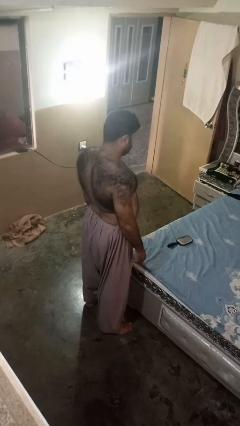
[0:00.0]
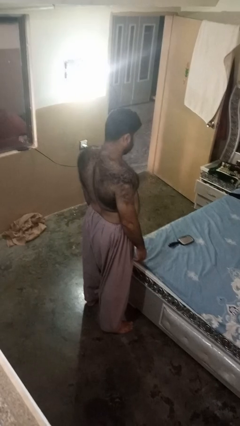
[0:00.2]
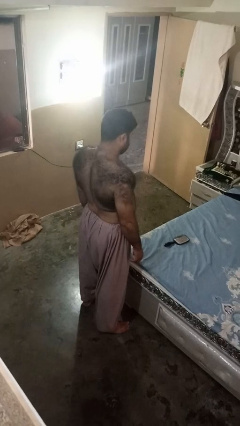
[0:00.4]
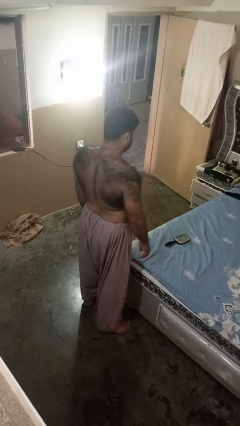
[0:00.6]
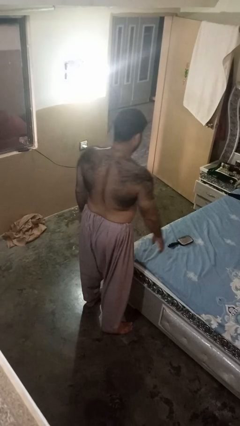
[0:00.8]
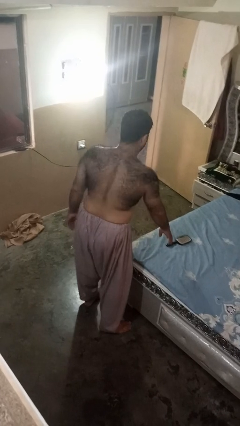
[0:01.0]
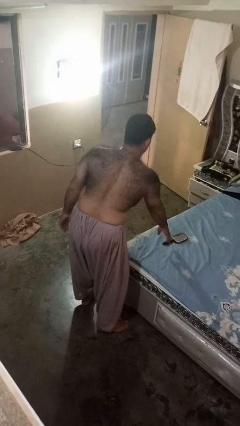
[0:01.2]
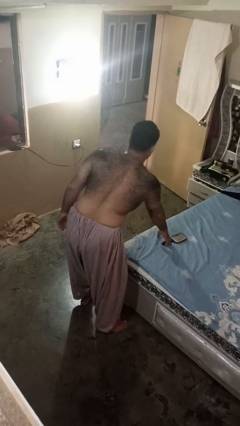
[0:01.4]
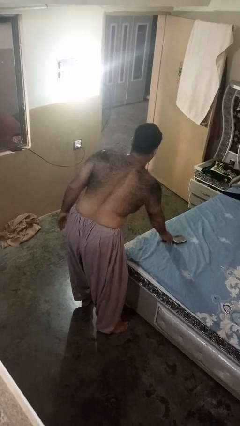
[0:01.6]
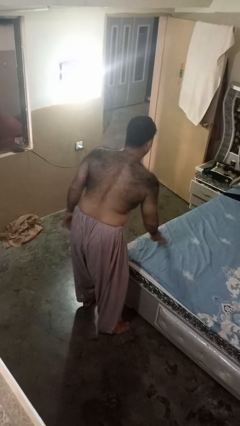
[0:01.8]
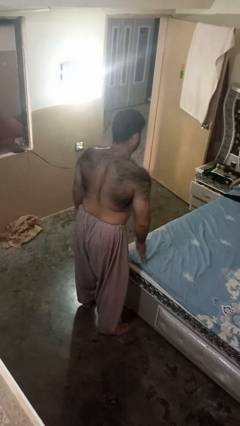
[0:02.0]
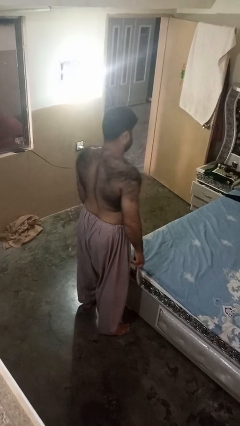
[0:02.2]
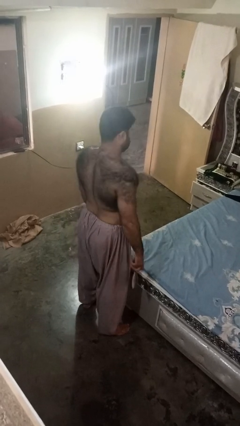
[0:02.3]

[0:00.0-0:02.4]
person picks up object from bed

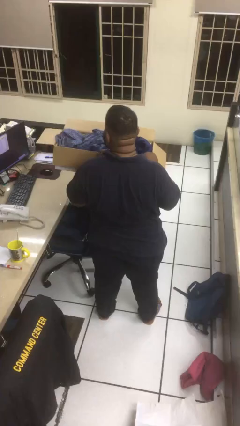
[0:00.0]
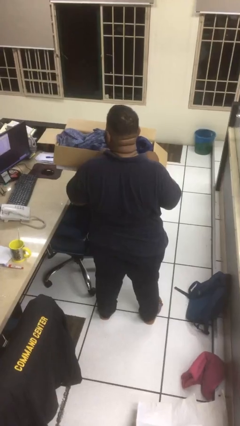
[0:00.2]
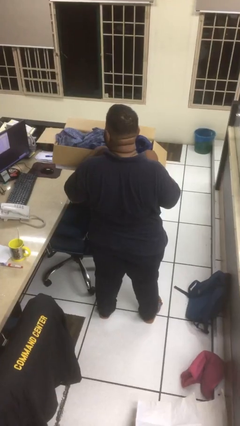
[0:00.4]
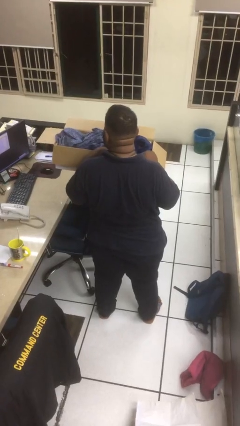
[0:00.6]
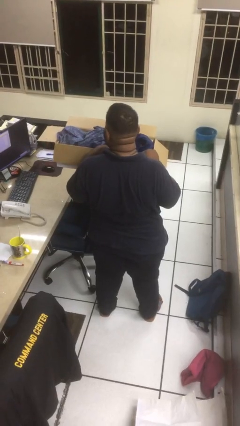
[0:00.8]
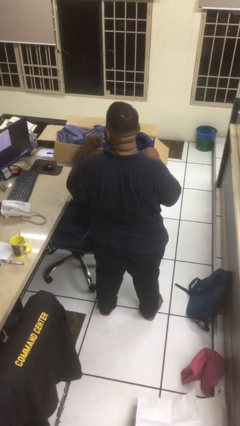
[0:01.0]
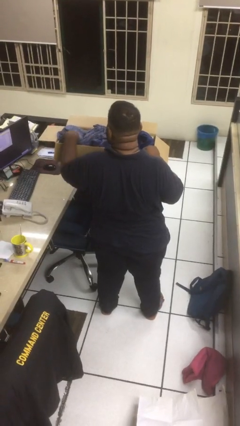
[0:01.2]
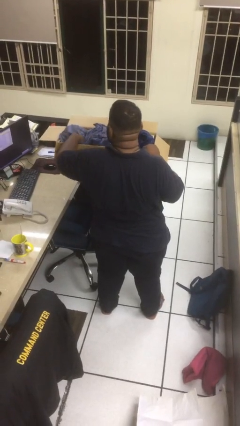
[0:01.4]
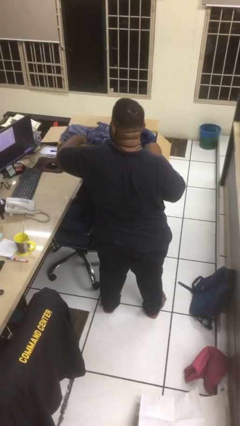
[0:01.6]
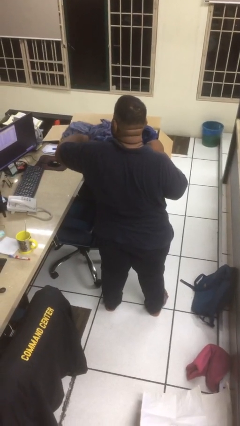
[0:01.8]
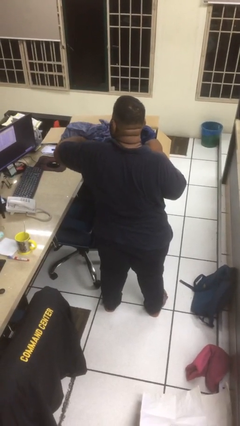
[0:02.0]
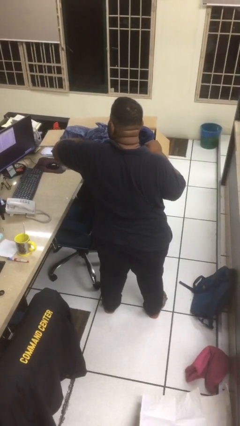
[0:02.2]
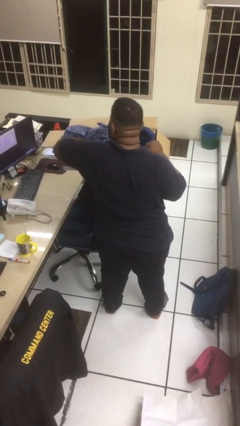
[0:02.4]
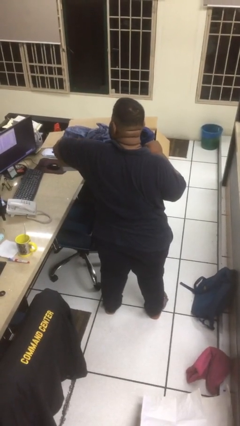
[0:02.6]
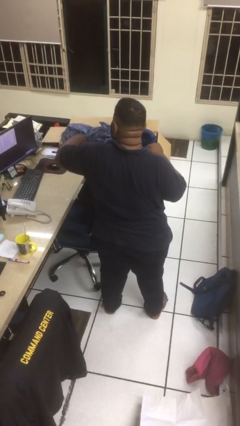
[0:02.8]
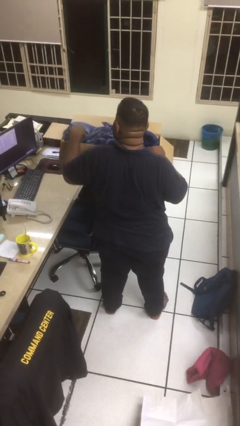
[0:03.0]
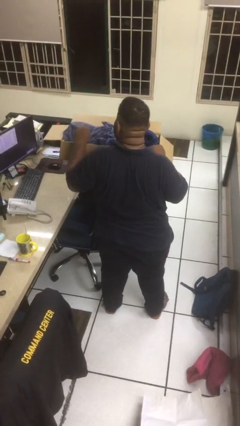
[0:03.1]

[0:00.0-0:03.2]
person searches in box

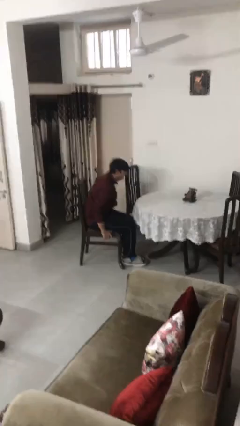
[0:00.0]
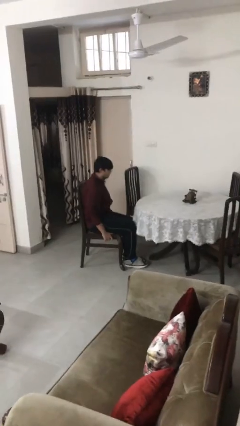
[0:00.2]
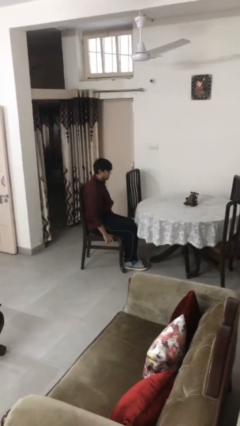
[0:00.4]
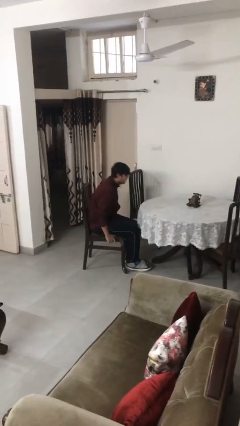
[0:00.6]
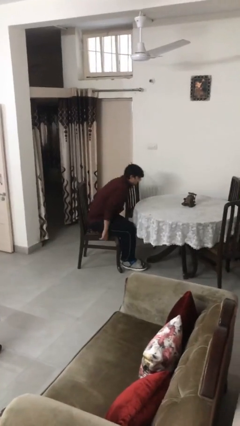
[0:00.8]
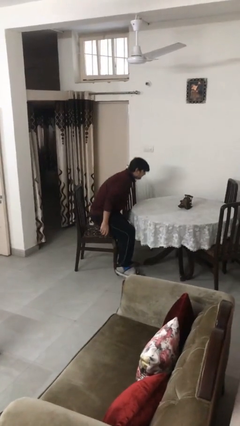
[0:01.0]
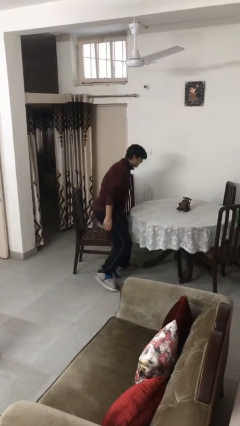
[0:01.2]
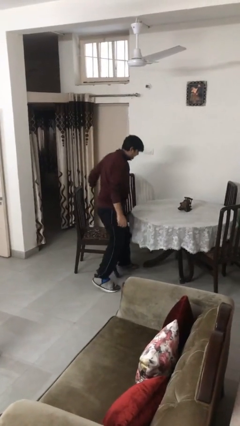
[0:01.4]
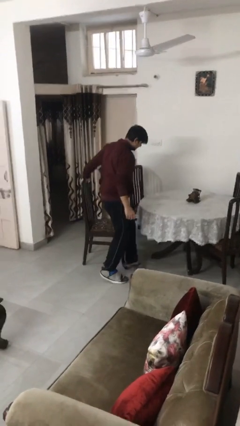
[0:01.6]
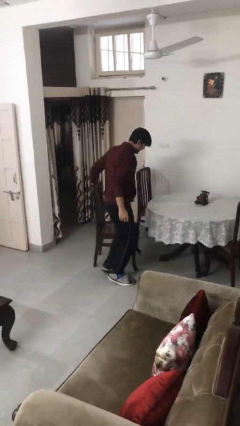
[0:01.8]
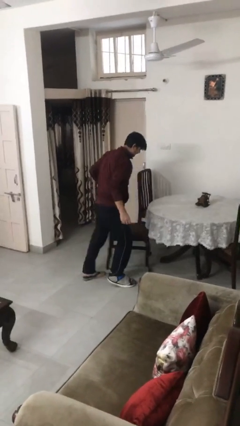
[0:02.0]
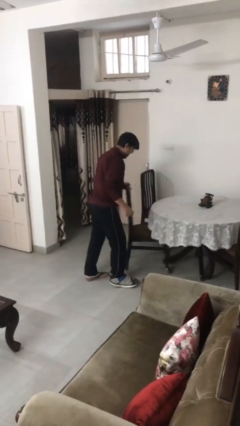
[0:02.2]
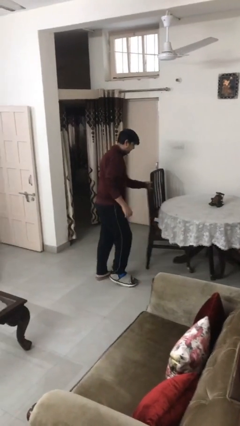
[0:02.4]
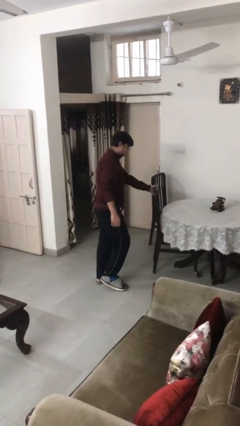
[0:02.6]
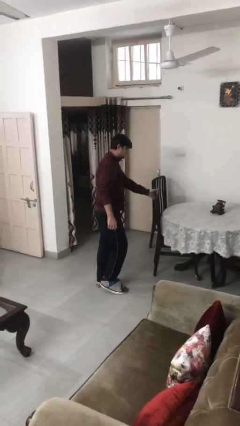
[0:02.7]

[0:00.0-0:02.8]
person stands up

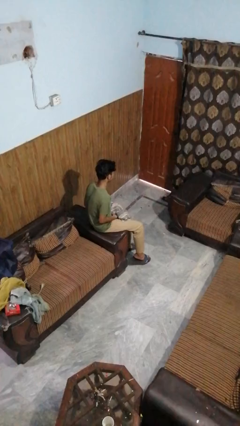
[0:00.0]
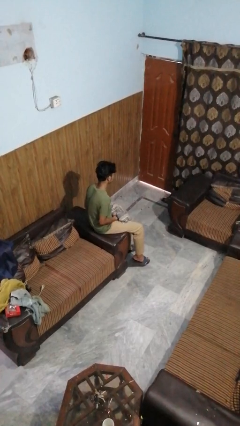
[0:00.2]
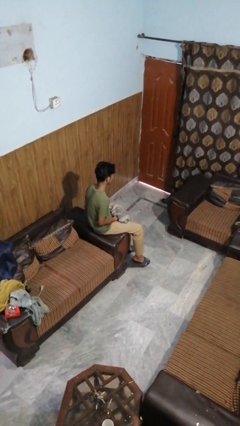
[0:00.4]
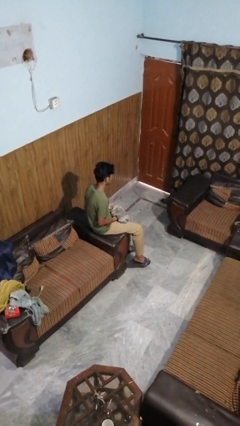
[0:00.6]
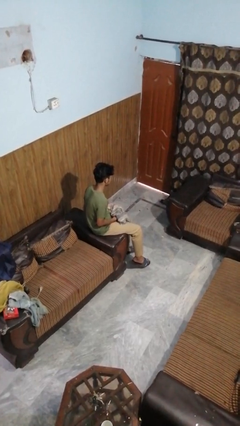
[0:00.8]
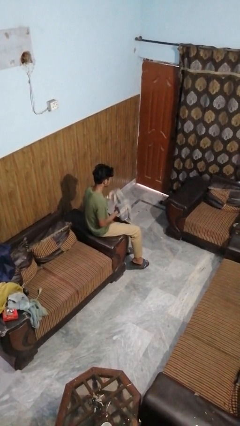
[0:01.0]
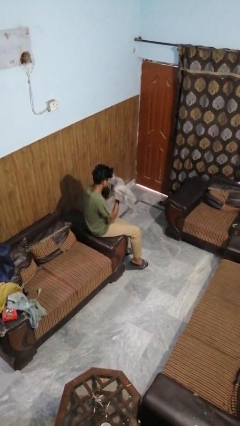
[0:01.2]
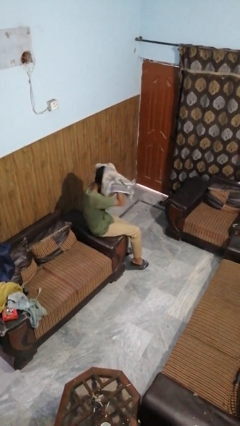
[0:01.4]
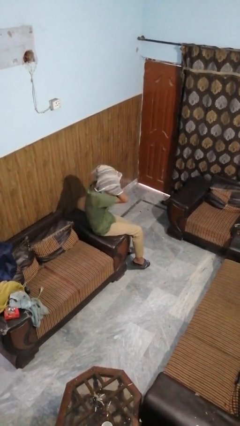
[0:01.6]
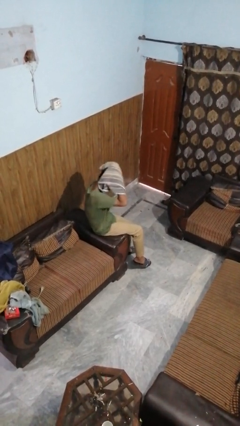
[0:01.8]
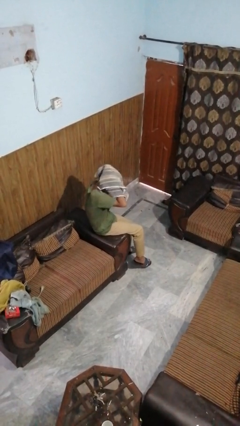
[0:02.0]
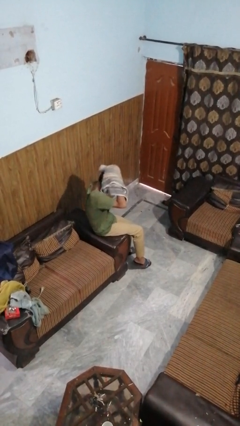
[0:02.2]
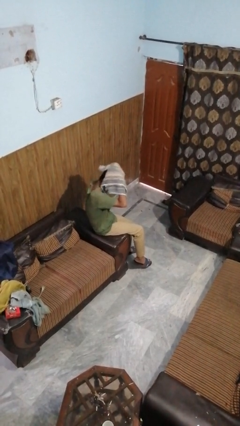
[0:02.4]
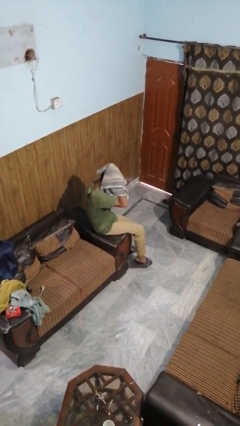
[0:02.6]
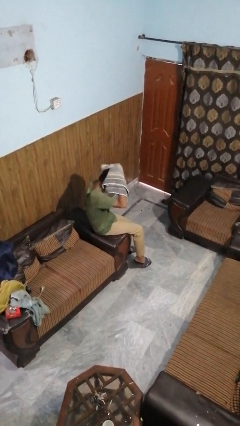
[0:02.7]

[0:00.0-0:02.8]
person dries hair with towel

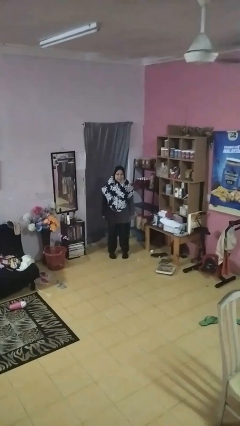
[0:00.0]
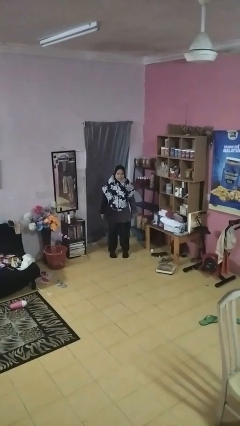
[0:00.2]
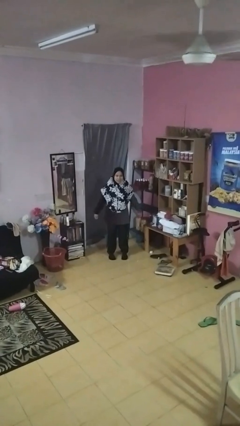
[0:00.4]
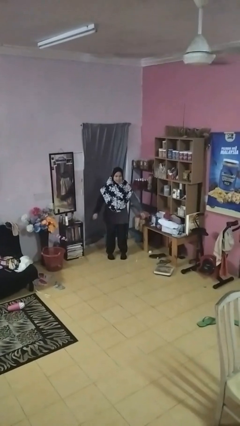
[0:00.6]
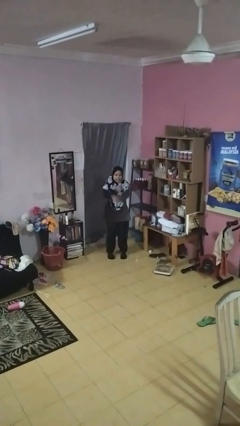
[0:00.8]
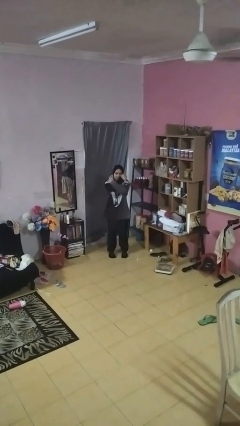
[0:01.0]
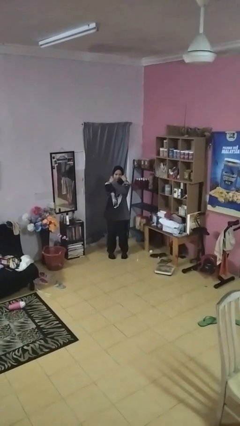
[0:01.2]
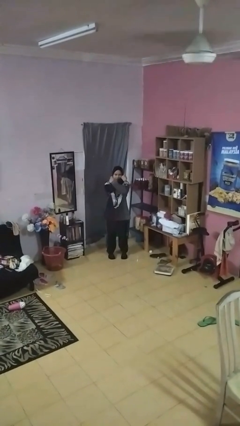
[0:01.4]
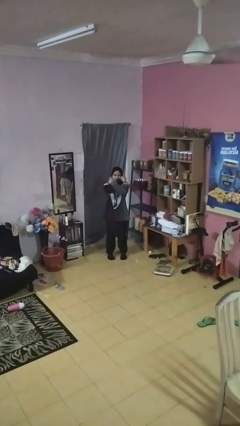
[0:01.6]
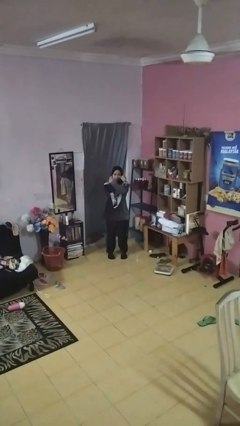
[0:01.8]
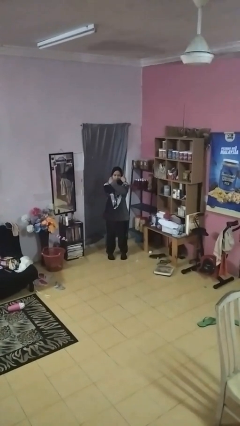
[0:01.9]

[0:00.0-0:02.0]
person crosses arms

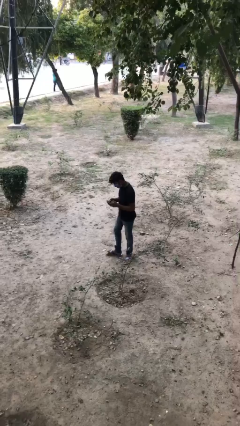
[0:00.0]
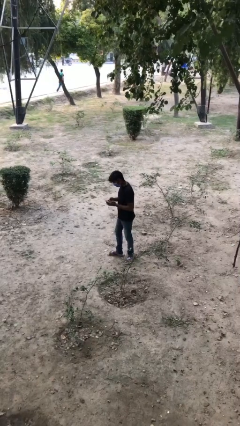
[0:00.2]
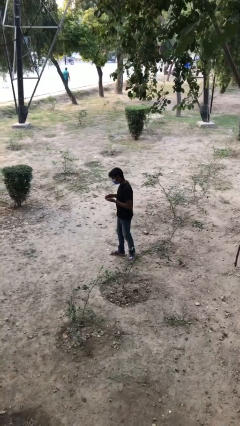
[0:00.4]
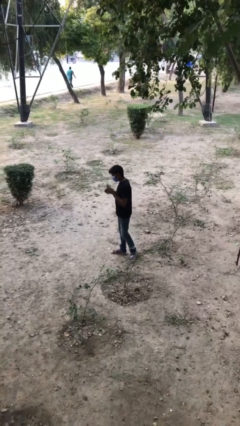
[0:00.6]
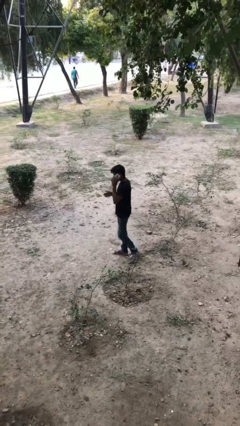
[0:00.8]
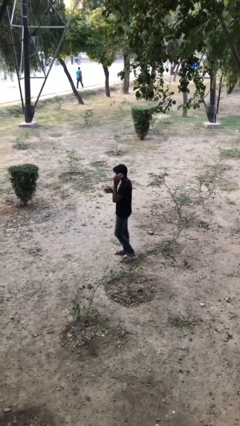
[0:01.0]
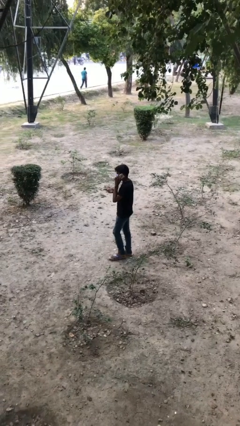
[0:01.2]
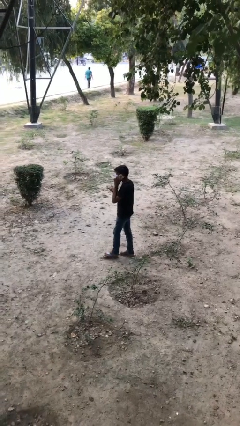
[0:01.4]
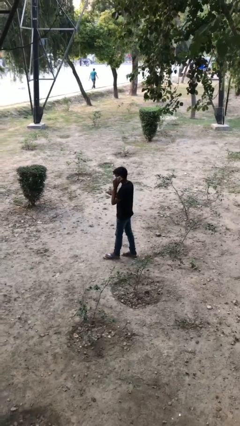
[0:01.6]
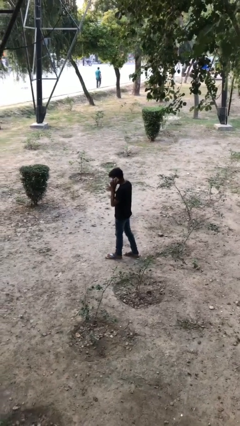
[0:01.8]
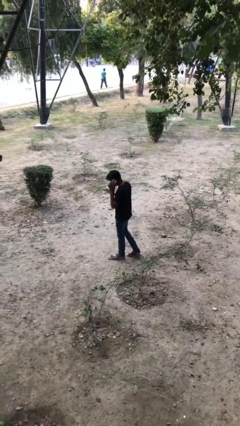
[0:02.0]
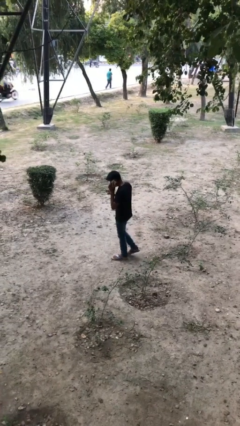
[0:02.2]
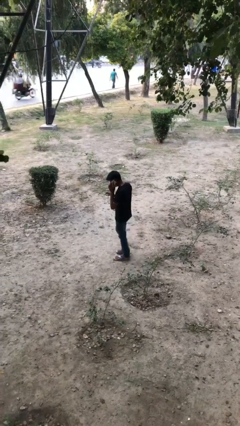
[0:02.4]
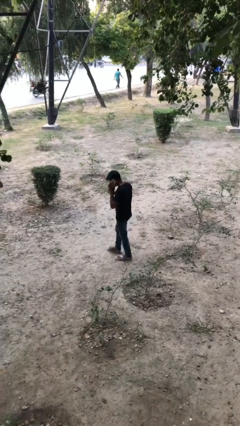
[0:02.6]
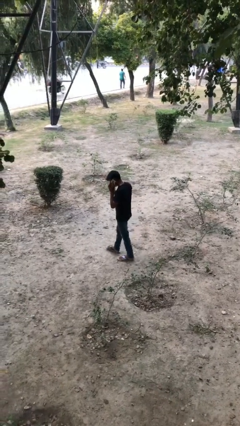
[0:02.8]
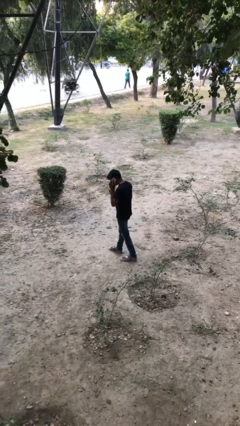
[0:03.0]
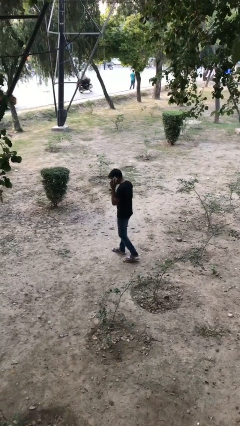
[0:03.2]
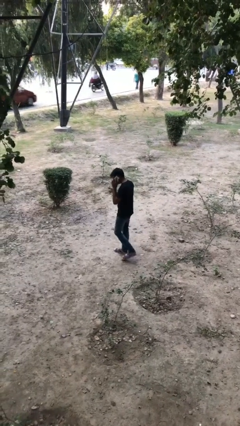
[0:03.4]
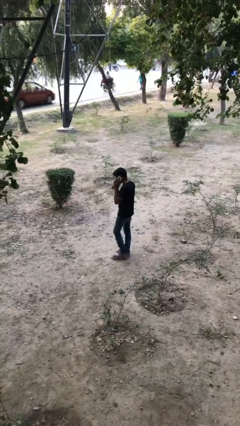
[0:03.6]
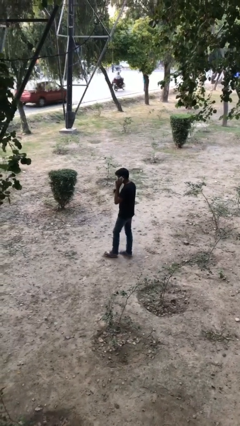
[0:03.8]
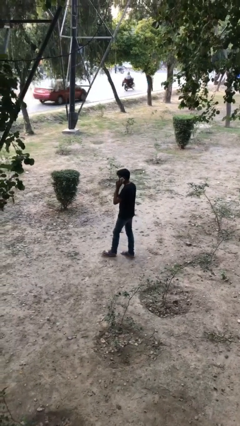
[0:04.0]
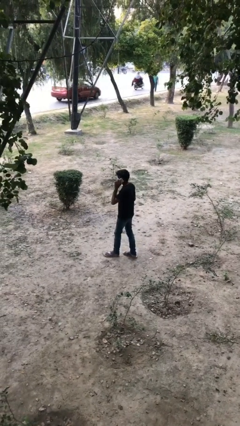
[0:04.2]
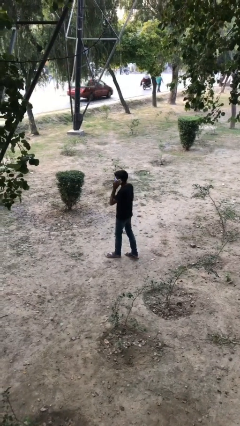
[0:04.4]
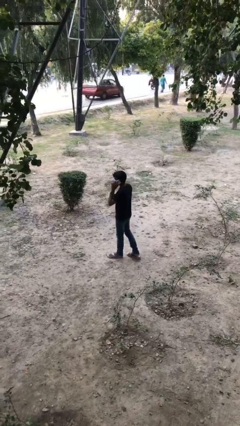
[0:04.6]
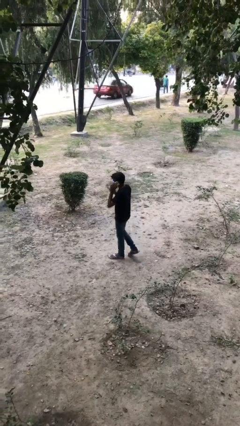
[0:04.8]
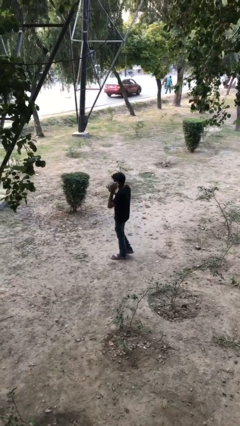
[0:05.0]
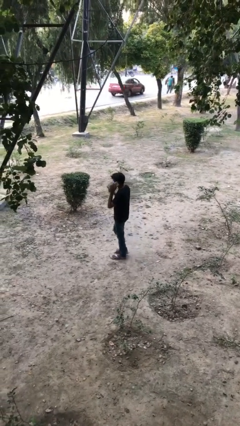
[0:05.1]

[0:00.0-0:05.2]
person talks on phone
